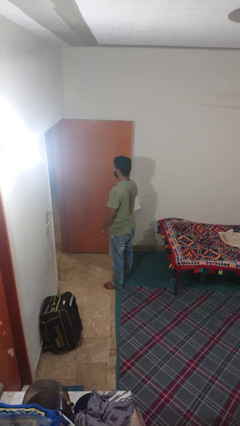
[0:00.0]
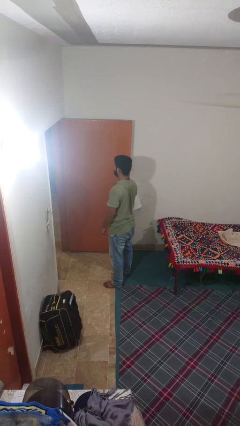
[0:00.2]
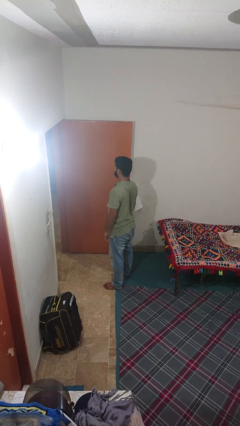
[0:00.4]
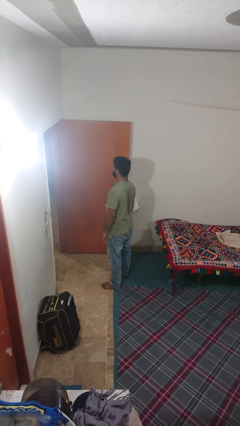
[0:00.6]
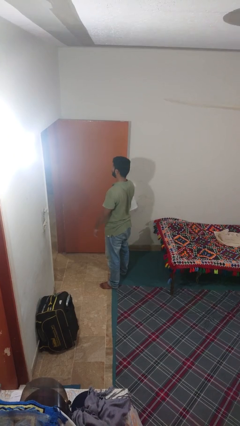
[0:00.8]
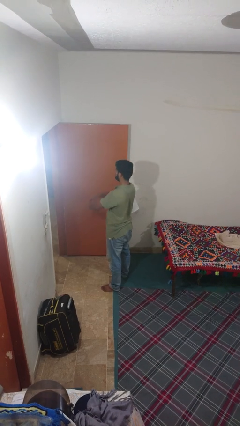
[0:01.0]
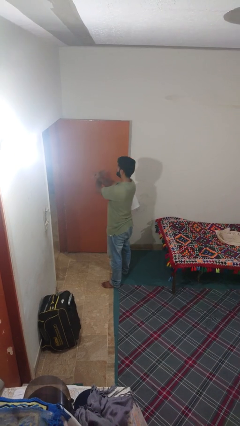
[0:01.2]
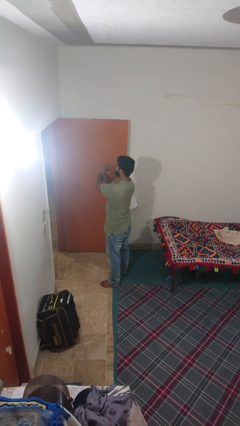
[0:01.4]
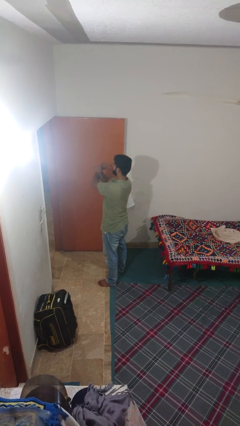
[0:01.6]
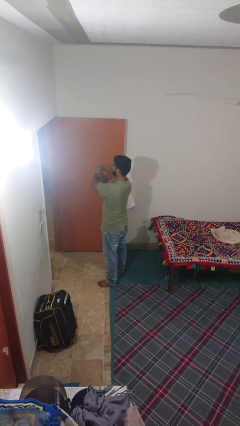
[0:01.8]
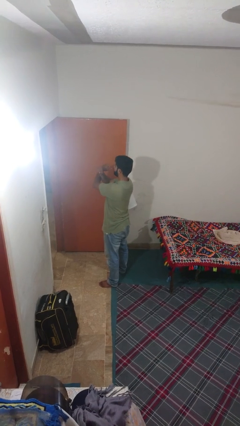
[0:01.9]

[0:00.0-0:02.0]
person crosses arms

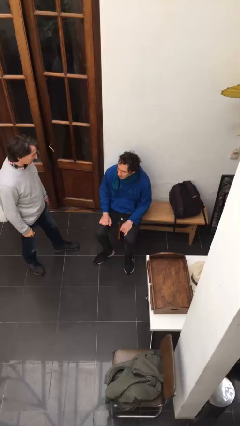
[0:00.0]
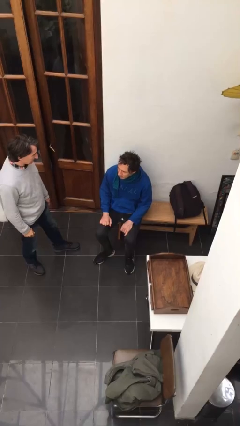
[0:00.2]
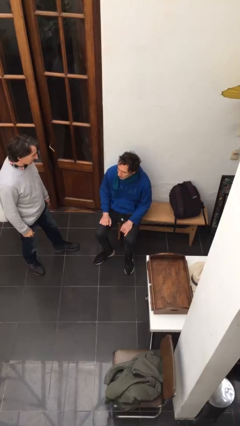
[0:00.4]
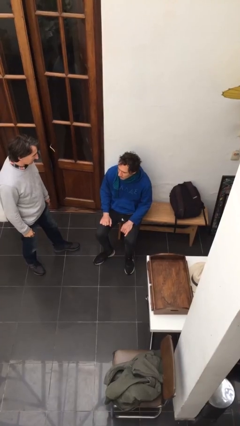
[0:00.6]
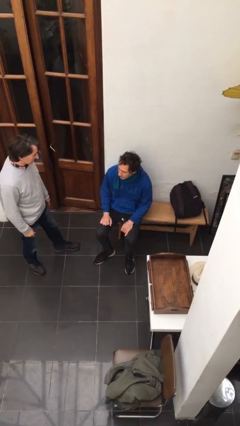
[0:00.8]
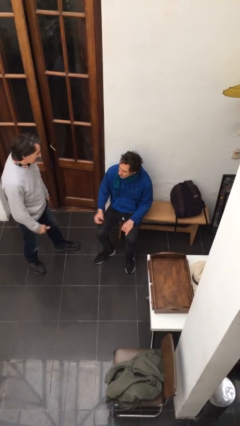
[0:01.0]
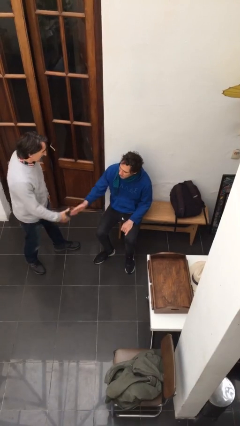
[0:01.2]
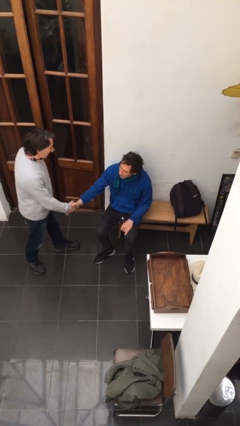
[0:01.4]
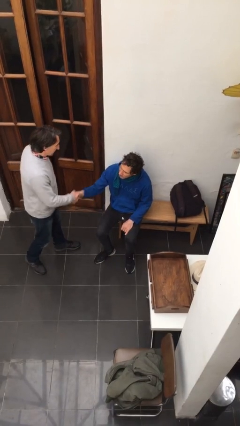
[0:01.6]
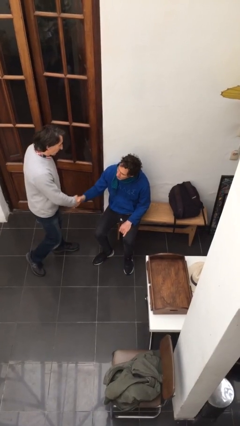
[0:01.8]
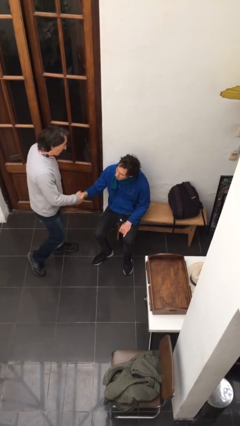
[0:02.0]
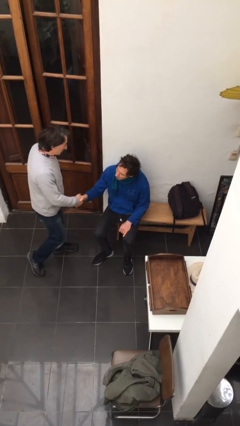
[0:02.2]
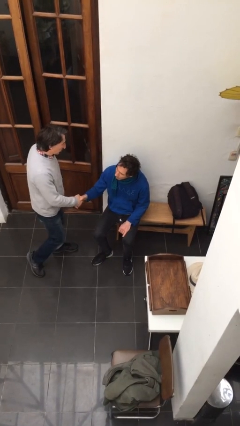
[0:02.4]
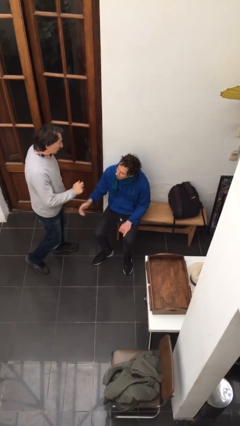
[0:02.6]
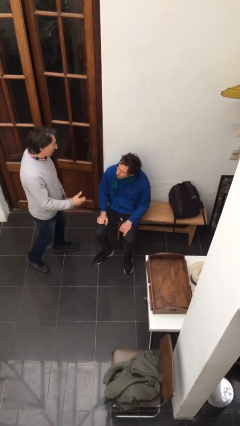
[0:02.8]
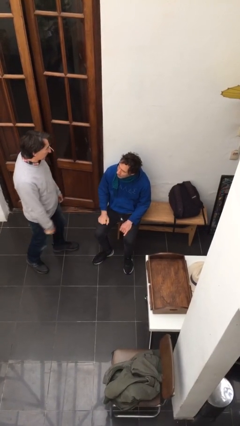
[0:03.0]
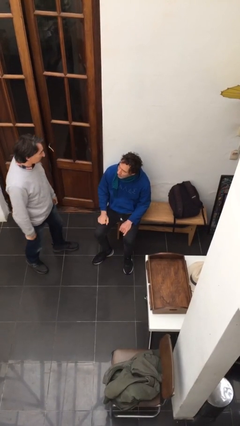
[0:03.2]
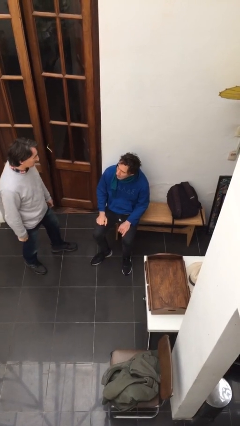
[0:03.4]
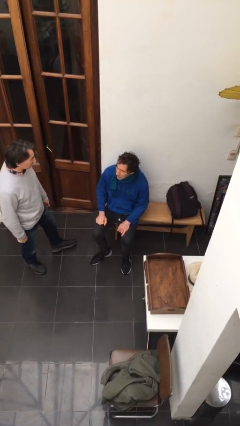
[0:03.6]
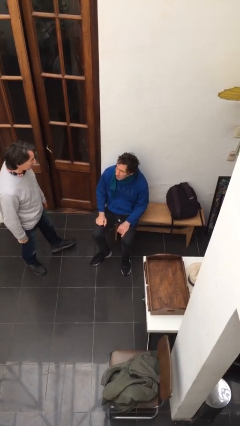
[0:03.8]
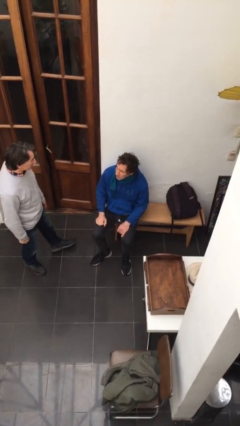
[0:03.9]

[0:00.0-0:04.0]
person shakes hand

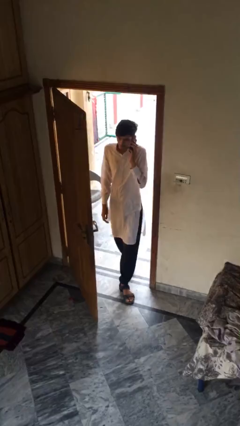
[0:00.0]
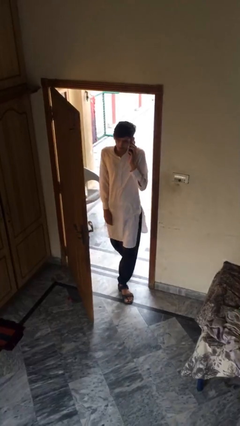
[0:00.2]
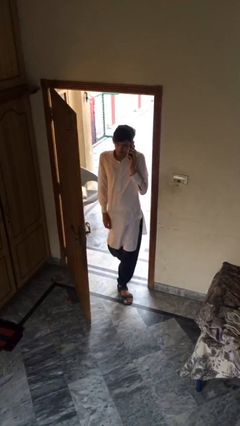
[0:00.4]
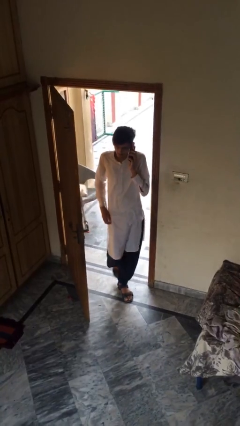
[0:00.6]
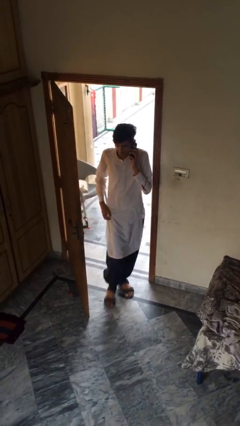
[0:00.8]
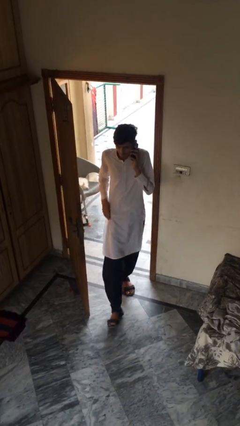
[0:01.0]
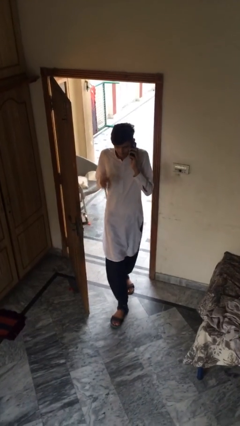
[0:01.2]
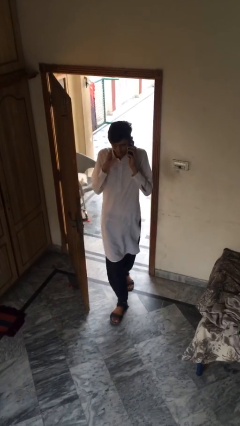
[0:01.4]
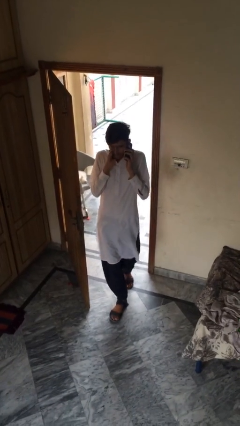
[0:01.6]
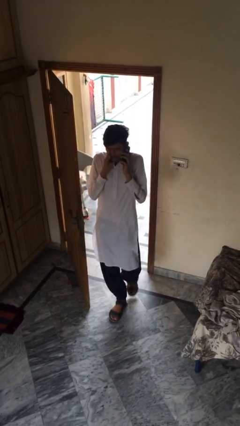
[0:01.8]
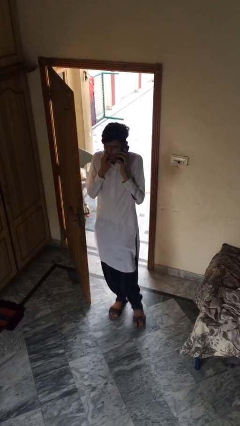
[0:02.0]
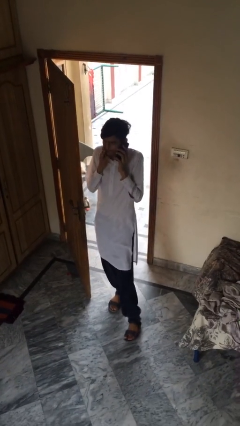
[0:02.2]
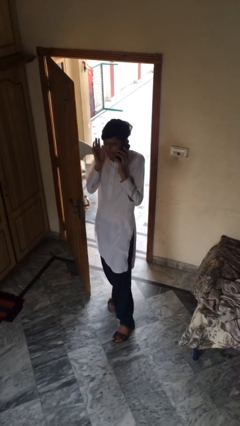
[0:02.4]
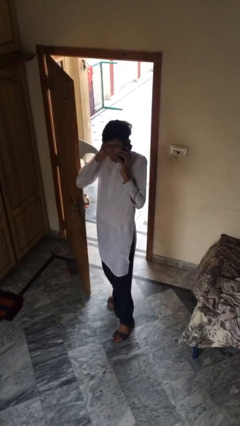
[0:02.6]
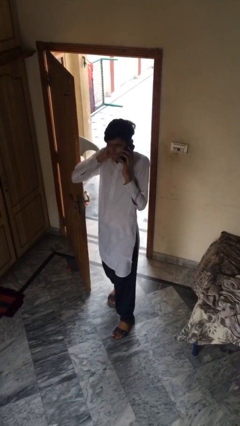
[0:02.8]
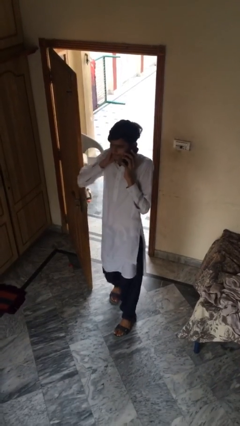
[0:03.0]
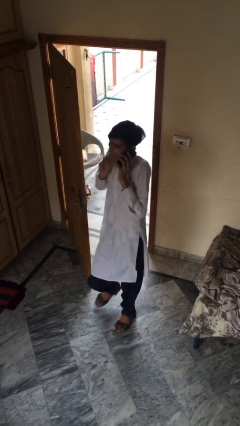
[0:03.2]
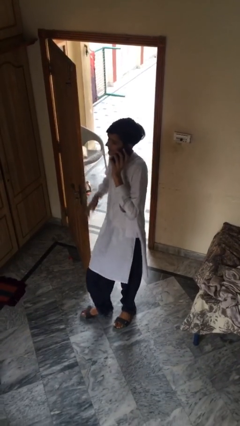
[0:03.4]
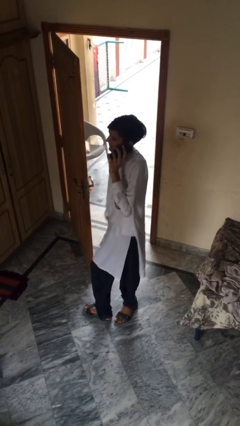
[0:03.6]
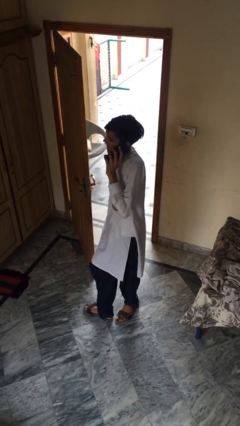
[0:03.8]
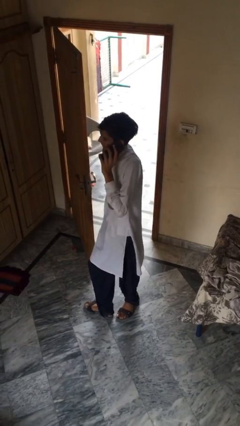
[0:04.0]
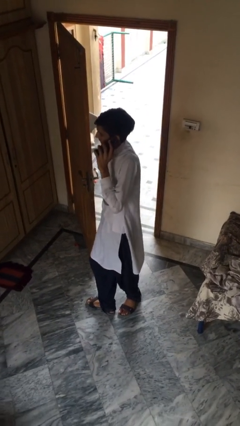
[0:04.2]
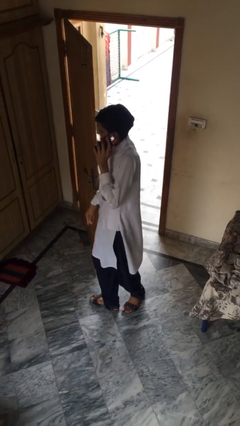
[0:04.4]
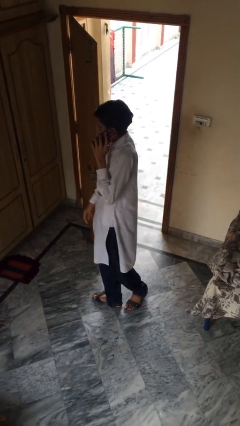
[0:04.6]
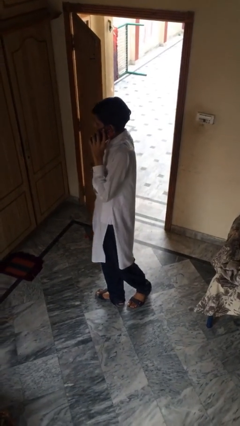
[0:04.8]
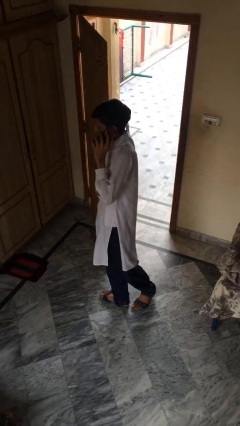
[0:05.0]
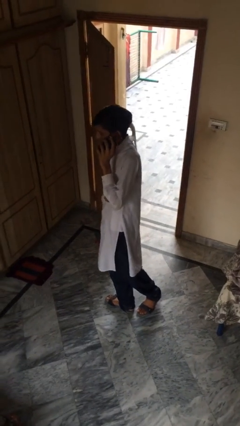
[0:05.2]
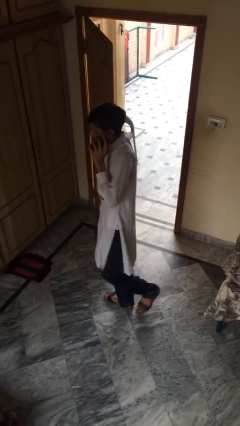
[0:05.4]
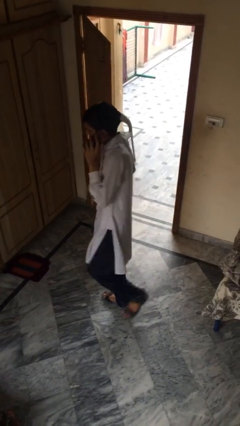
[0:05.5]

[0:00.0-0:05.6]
person enters scene through structure

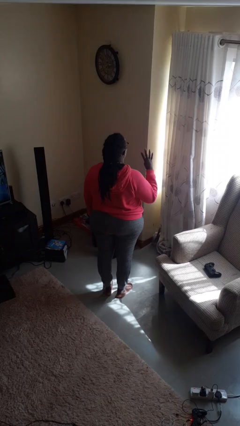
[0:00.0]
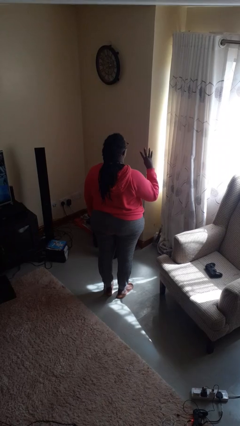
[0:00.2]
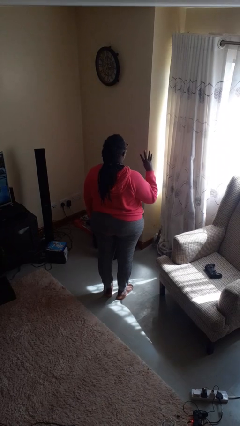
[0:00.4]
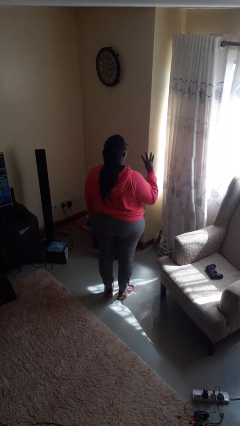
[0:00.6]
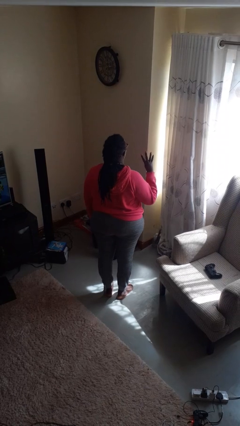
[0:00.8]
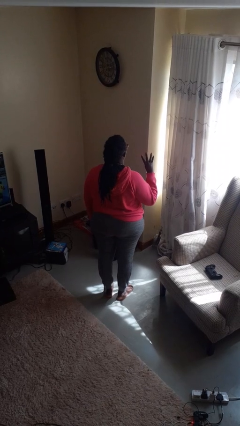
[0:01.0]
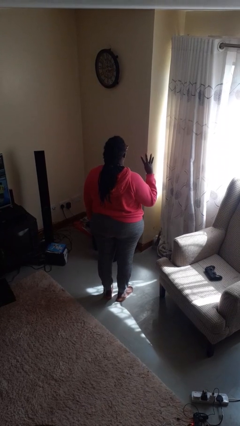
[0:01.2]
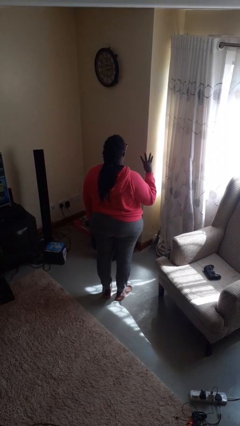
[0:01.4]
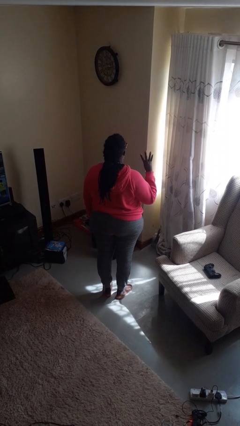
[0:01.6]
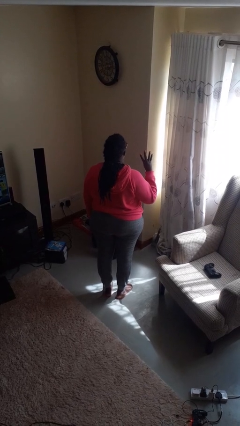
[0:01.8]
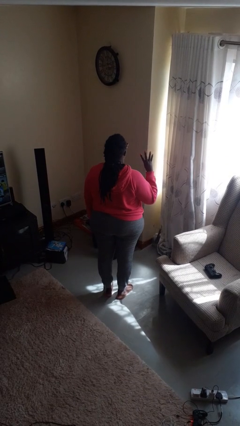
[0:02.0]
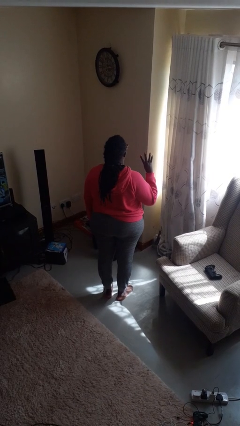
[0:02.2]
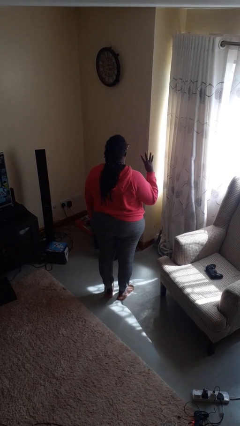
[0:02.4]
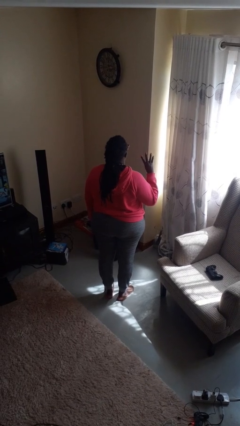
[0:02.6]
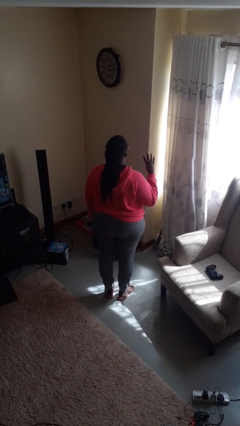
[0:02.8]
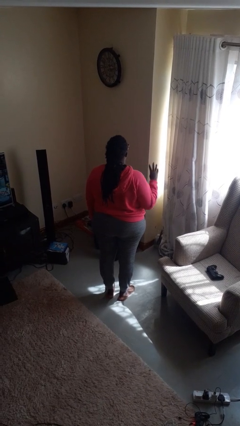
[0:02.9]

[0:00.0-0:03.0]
person gestures number four

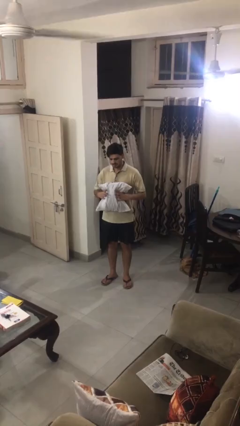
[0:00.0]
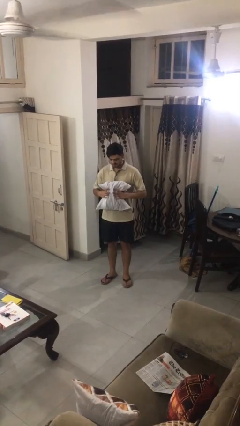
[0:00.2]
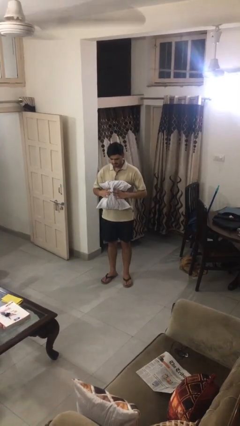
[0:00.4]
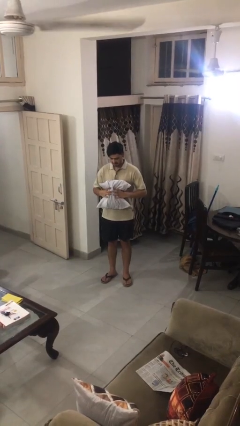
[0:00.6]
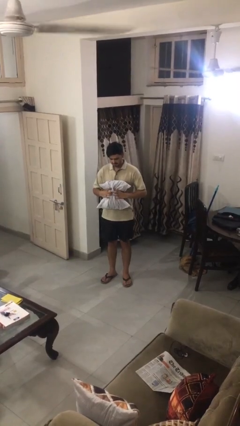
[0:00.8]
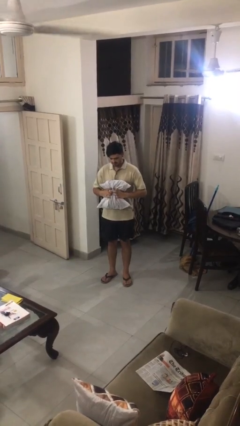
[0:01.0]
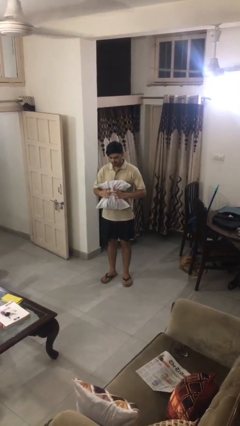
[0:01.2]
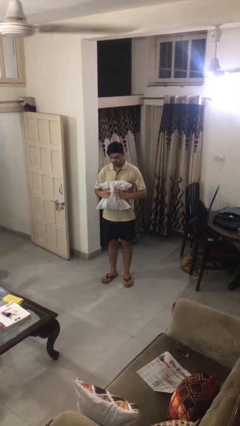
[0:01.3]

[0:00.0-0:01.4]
person squeezes object

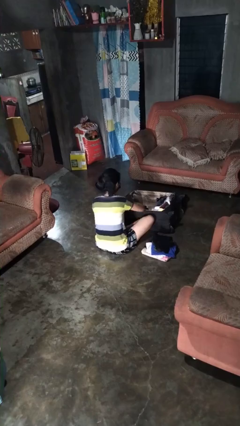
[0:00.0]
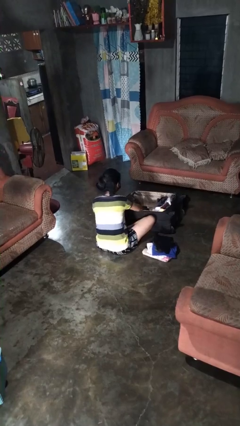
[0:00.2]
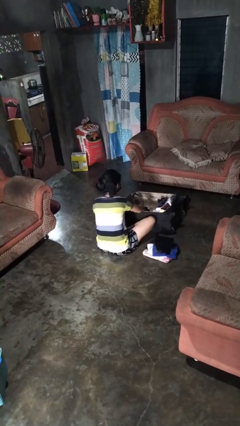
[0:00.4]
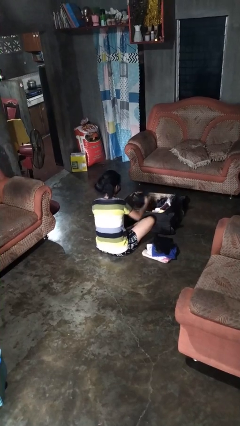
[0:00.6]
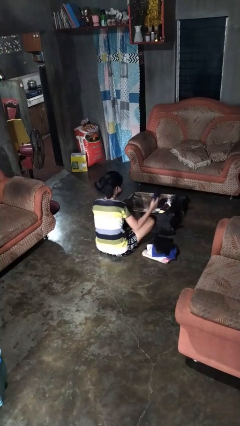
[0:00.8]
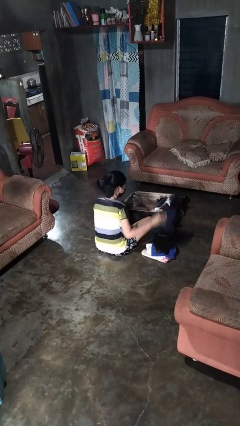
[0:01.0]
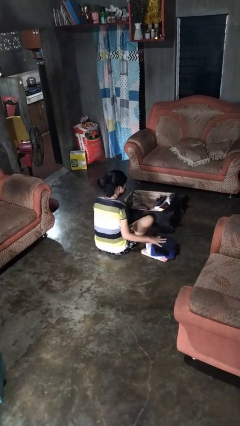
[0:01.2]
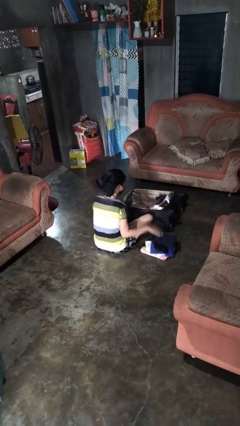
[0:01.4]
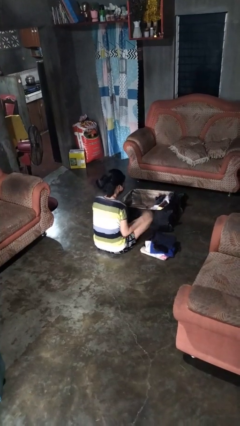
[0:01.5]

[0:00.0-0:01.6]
person unloads clothes from suitcase
